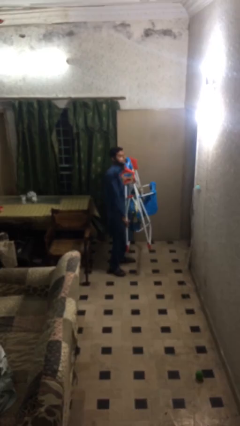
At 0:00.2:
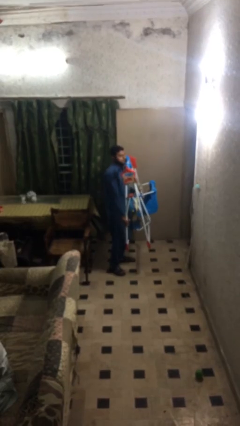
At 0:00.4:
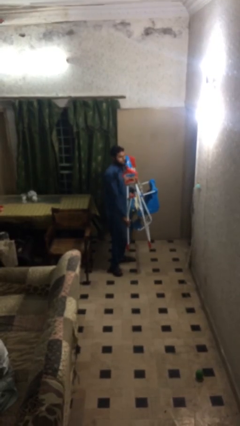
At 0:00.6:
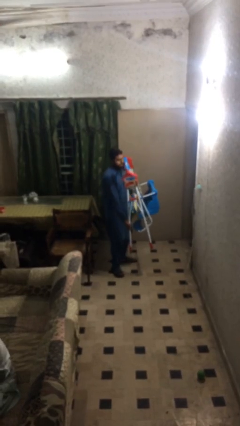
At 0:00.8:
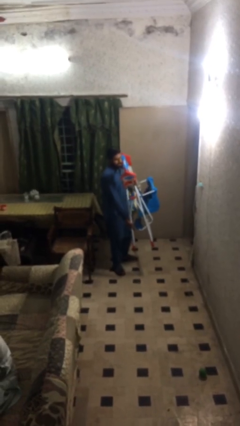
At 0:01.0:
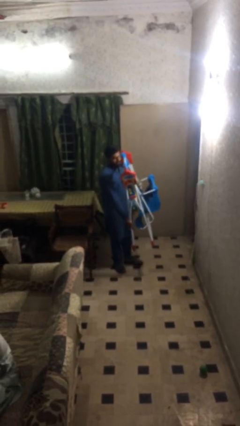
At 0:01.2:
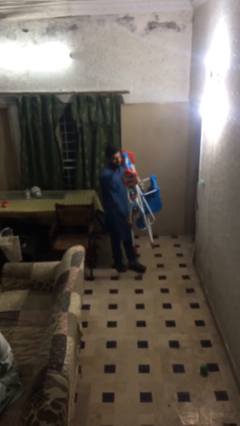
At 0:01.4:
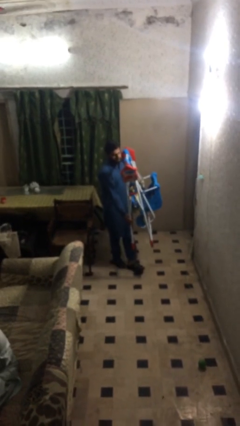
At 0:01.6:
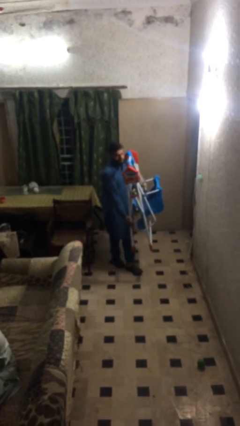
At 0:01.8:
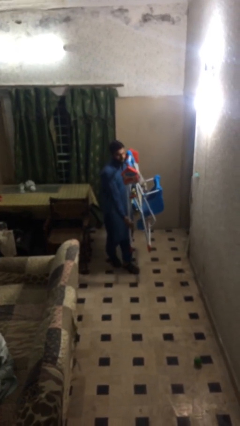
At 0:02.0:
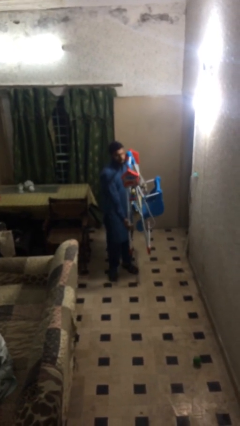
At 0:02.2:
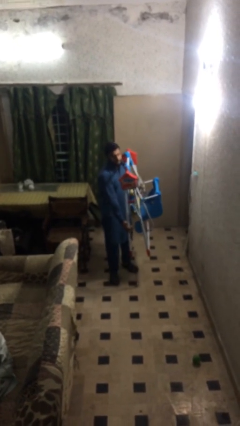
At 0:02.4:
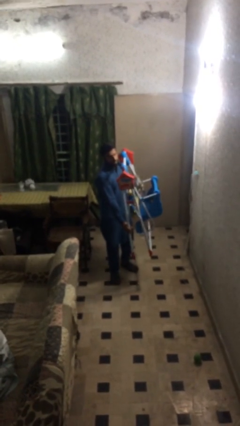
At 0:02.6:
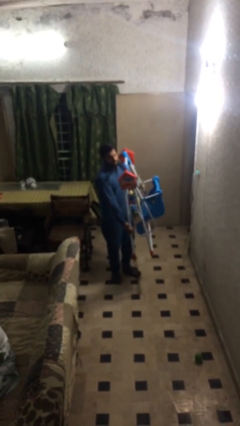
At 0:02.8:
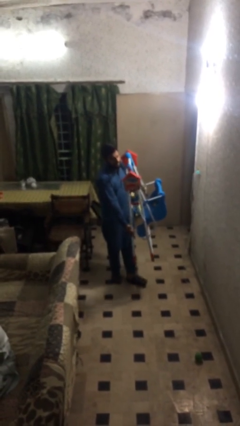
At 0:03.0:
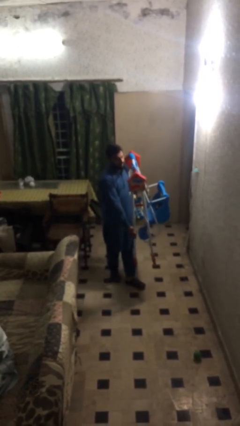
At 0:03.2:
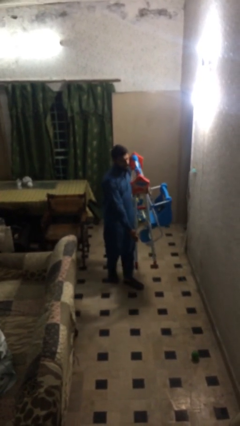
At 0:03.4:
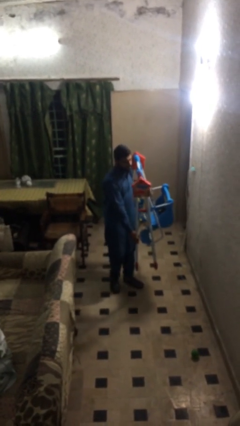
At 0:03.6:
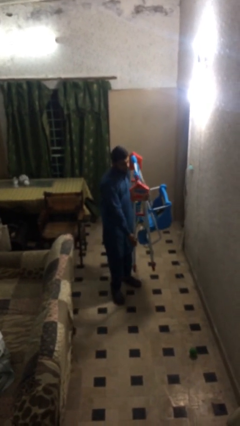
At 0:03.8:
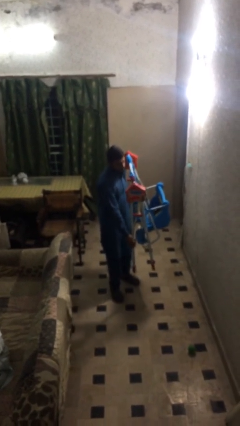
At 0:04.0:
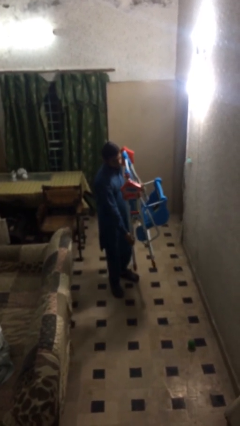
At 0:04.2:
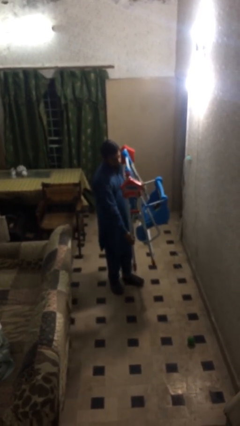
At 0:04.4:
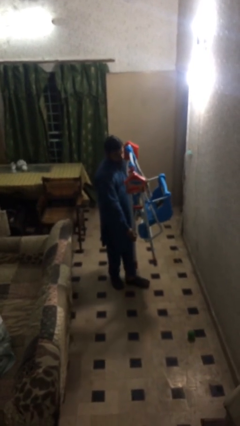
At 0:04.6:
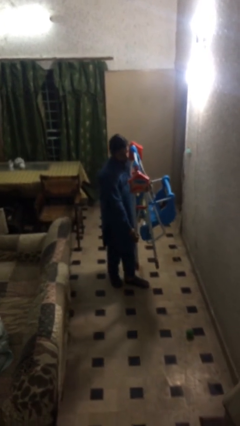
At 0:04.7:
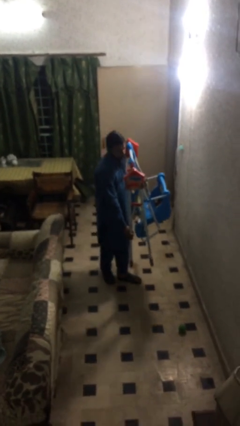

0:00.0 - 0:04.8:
person carries heavy object

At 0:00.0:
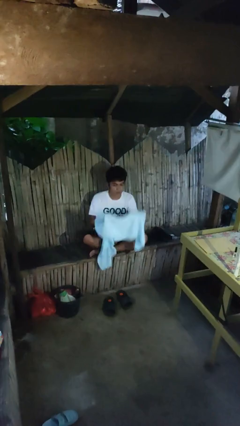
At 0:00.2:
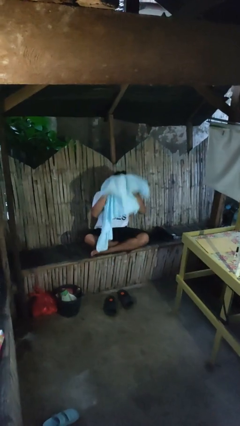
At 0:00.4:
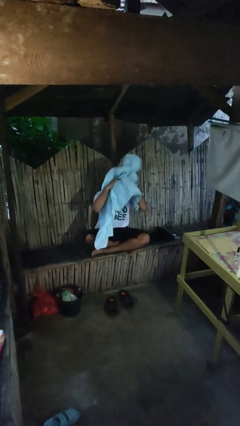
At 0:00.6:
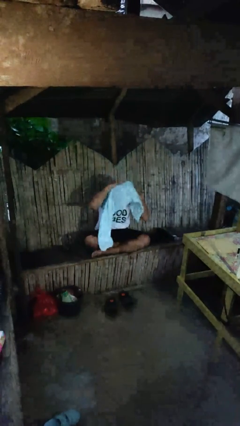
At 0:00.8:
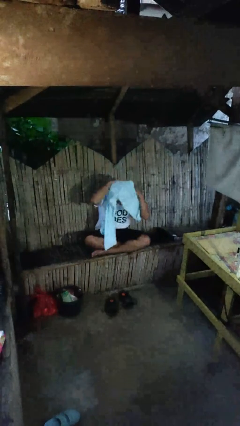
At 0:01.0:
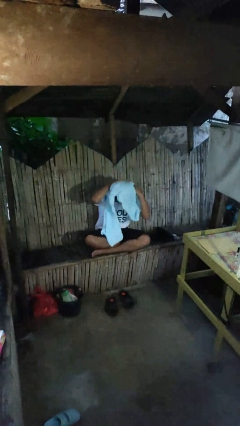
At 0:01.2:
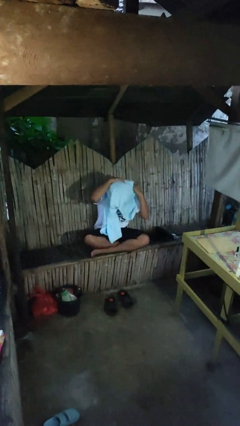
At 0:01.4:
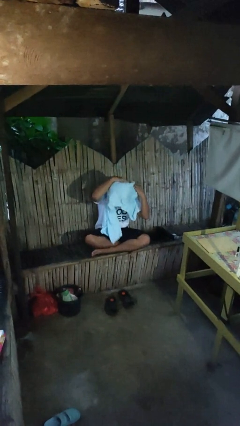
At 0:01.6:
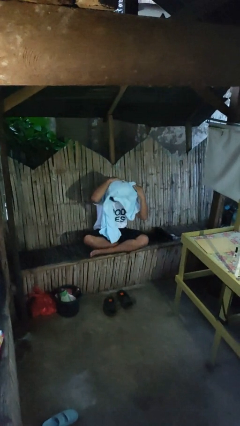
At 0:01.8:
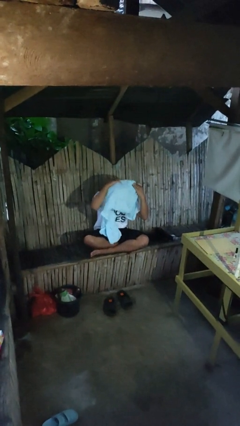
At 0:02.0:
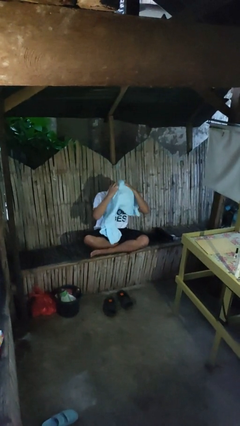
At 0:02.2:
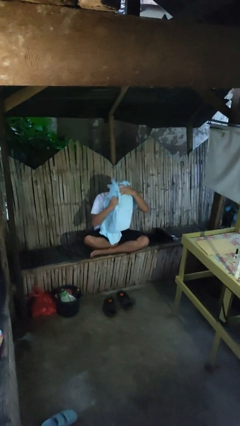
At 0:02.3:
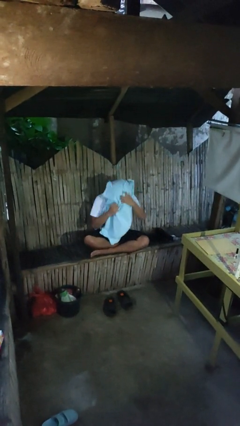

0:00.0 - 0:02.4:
person dries hair with towel

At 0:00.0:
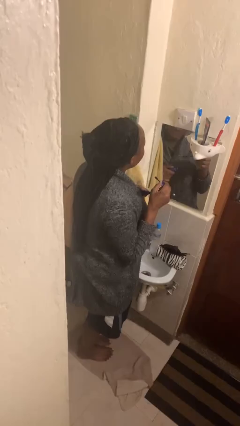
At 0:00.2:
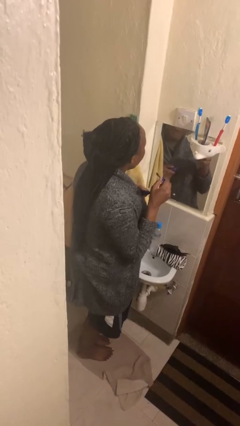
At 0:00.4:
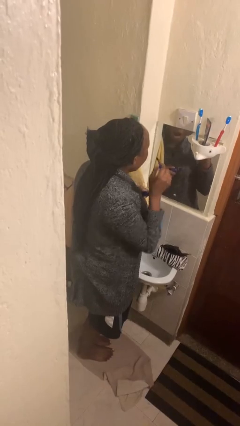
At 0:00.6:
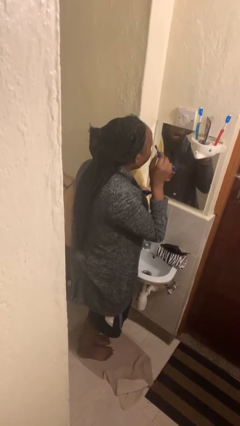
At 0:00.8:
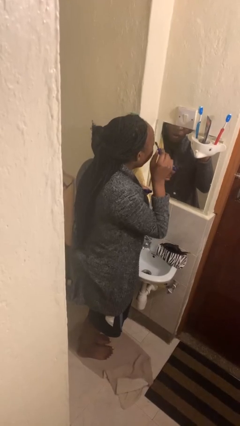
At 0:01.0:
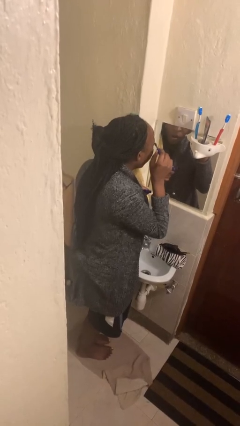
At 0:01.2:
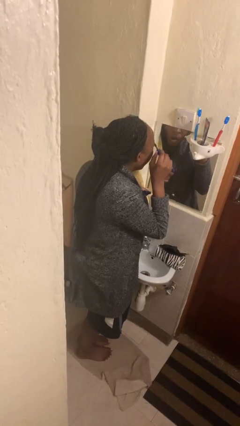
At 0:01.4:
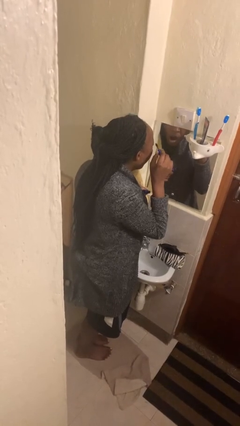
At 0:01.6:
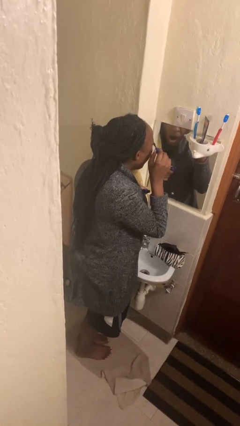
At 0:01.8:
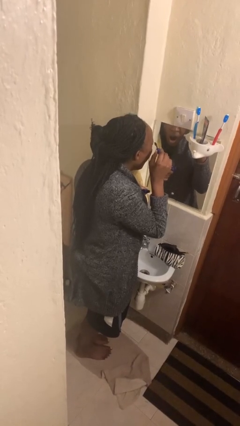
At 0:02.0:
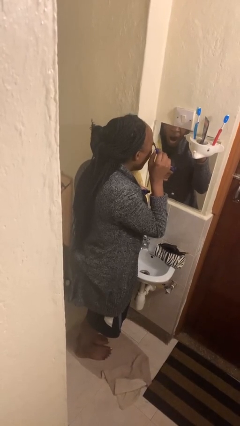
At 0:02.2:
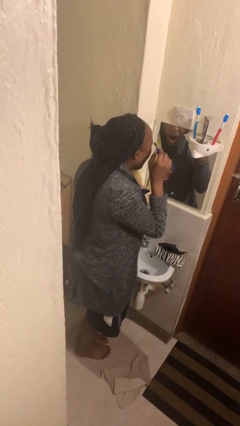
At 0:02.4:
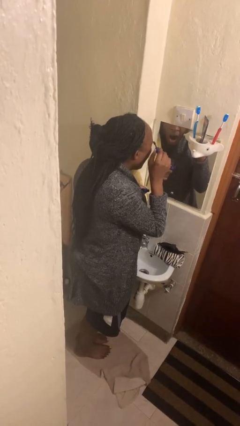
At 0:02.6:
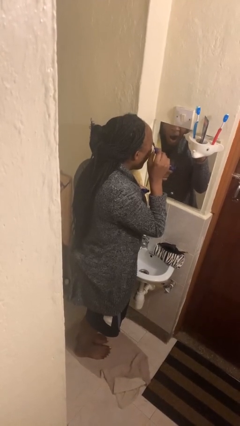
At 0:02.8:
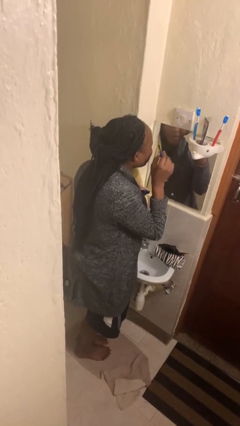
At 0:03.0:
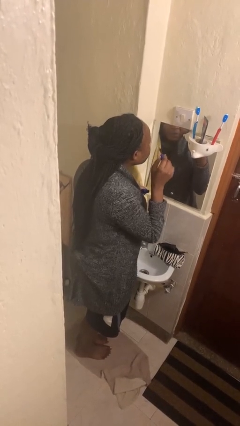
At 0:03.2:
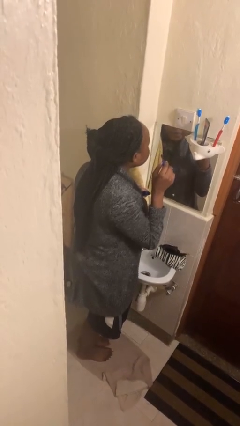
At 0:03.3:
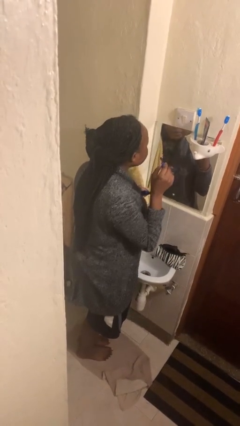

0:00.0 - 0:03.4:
person applies eye makeup

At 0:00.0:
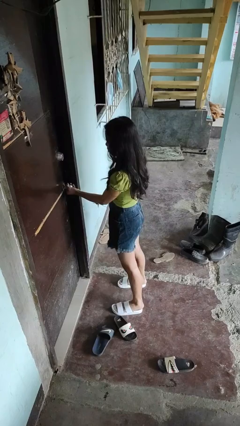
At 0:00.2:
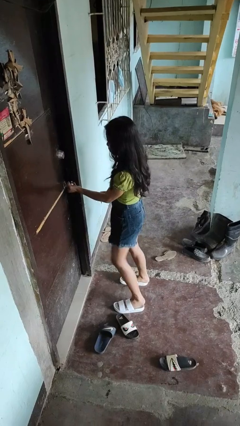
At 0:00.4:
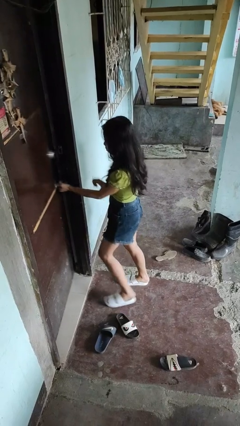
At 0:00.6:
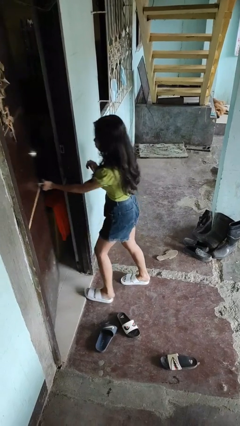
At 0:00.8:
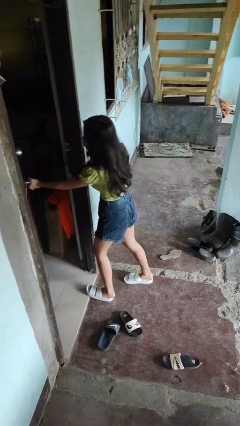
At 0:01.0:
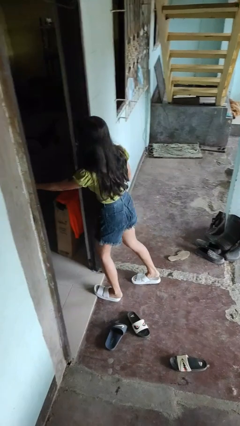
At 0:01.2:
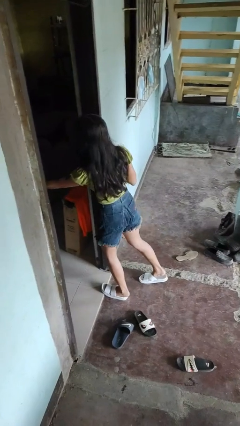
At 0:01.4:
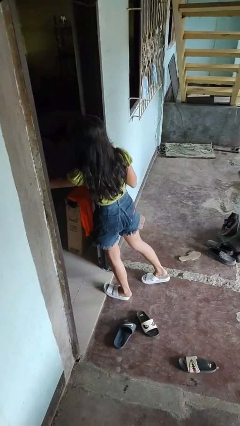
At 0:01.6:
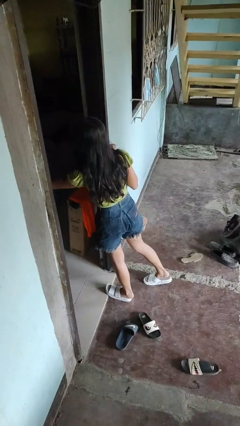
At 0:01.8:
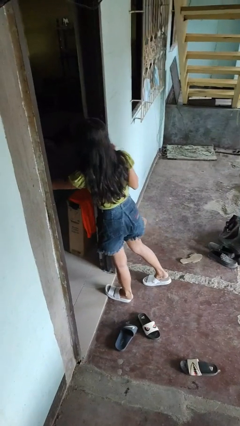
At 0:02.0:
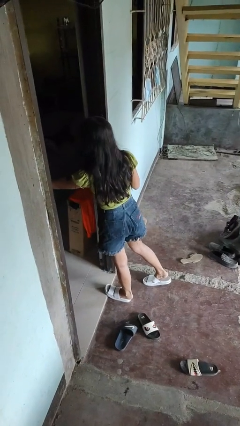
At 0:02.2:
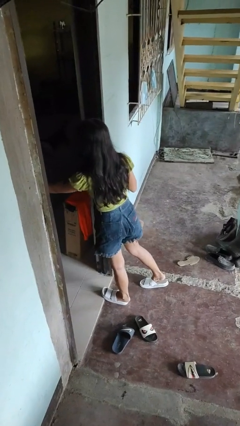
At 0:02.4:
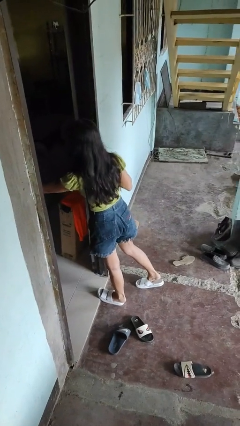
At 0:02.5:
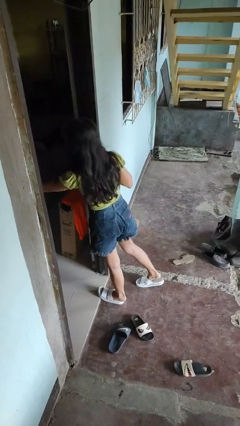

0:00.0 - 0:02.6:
person opens facility door

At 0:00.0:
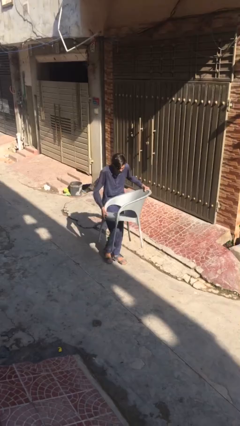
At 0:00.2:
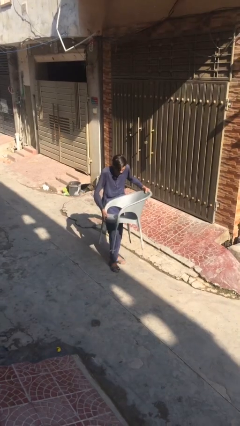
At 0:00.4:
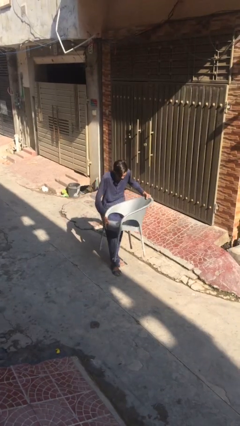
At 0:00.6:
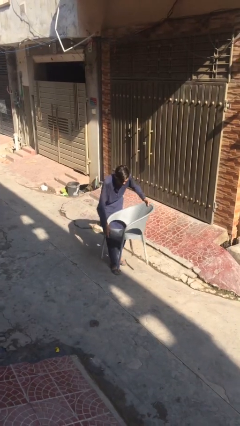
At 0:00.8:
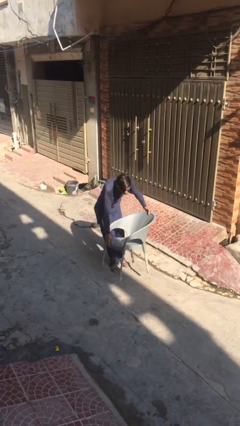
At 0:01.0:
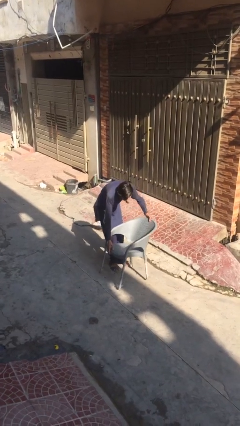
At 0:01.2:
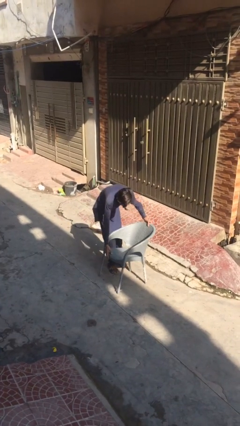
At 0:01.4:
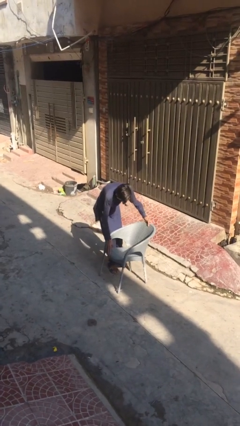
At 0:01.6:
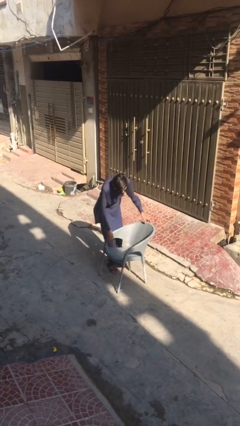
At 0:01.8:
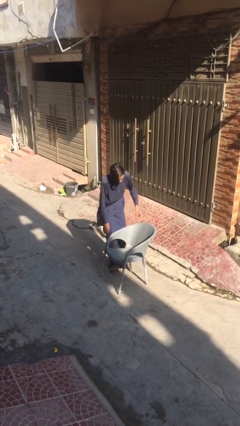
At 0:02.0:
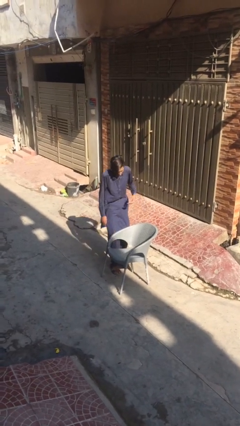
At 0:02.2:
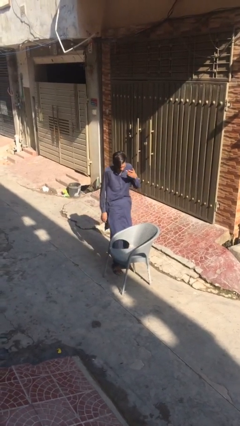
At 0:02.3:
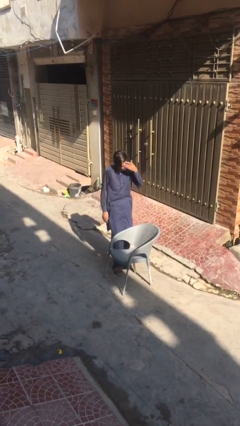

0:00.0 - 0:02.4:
person puts down object on floor

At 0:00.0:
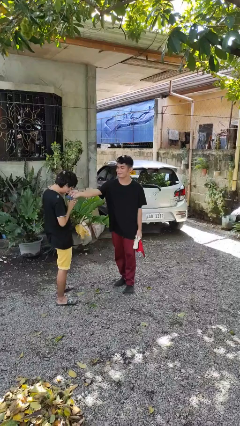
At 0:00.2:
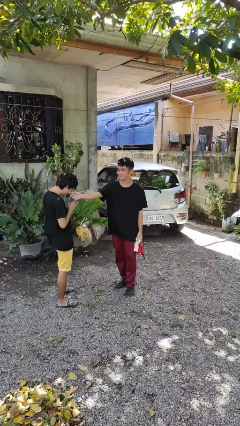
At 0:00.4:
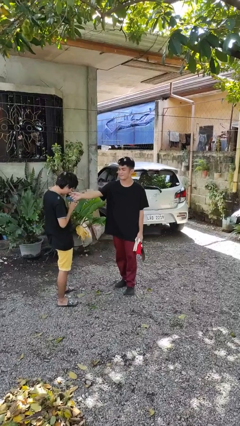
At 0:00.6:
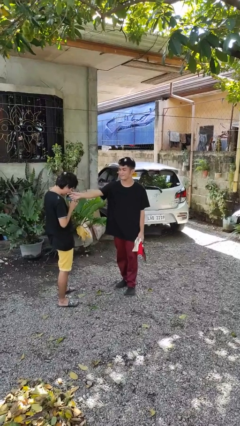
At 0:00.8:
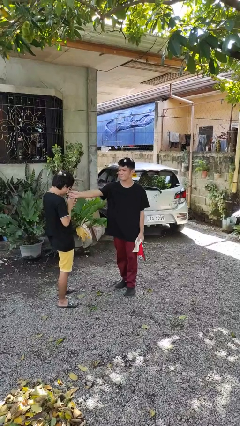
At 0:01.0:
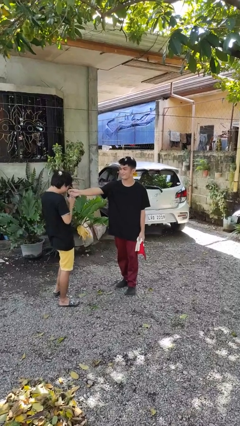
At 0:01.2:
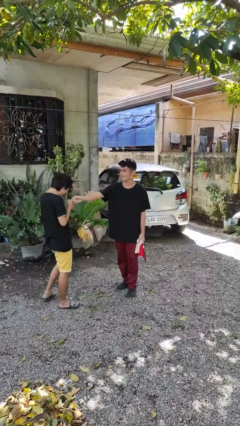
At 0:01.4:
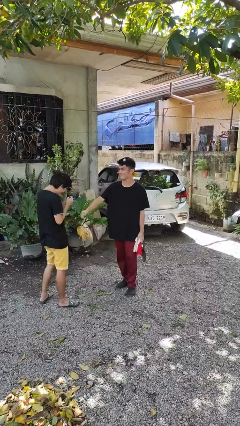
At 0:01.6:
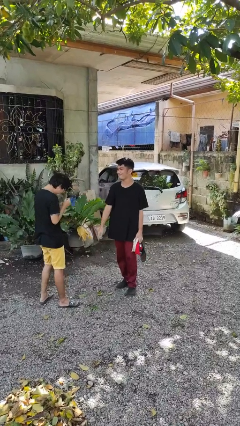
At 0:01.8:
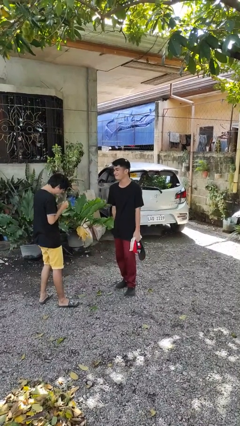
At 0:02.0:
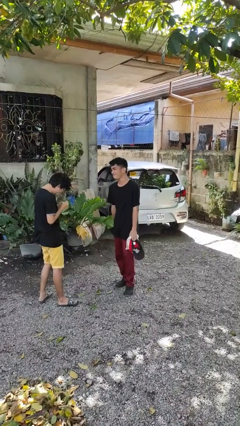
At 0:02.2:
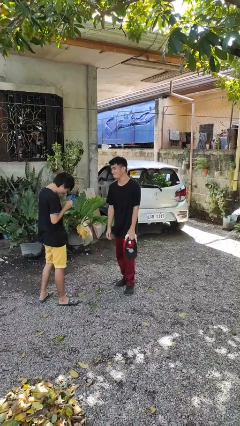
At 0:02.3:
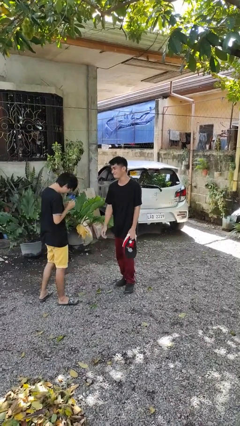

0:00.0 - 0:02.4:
person touches face of person
